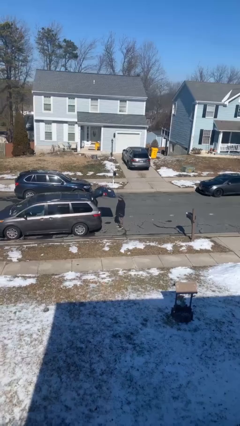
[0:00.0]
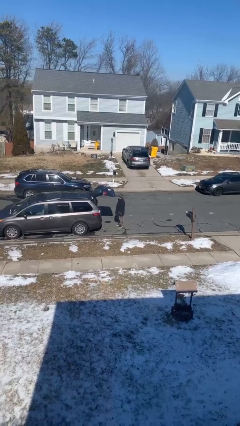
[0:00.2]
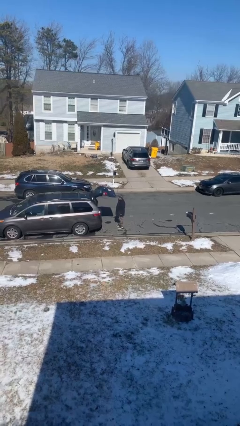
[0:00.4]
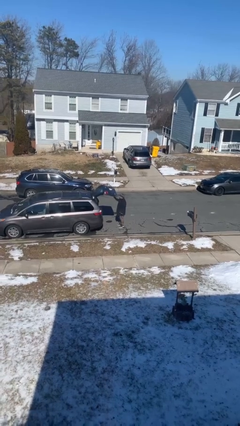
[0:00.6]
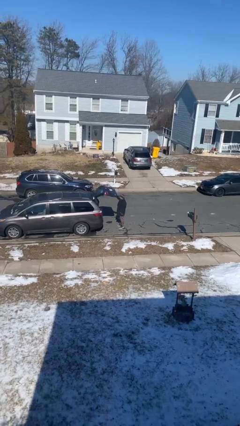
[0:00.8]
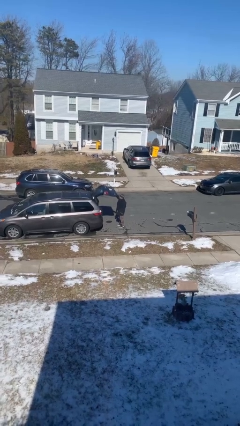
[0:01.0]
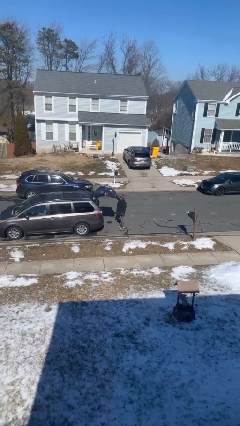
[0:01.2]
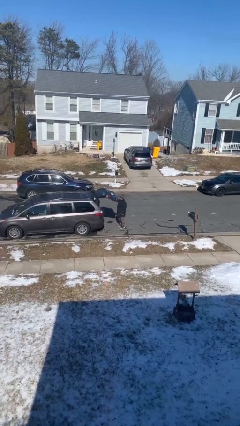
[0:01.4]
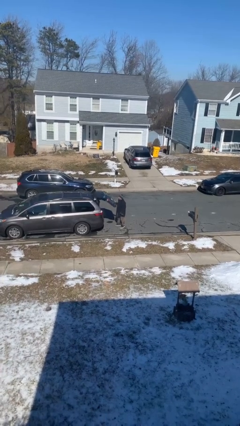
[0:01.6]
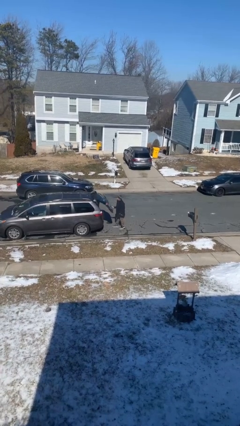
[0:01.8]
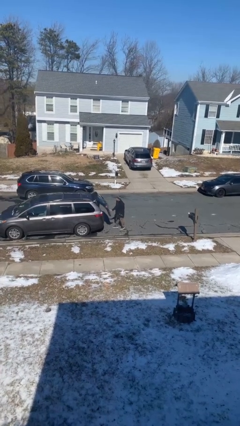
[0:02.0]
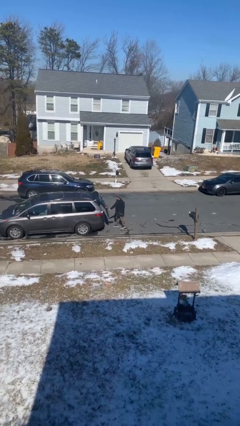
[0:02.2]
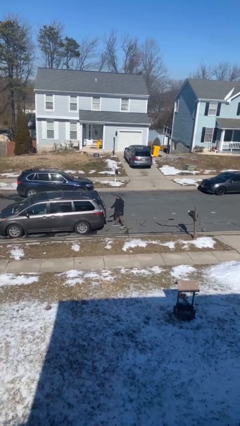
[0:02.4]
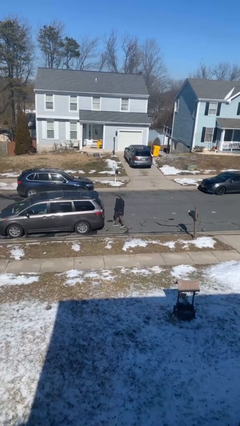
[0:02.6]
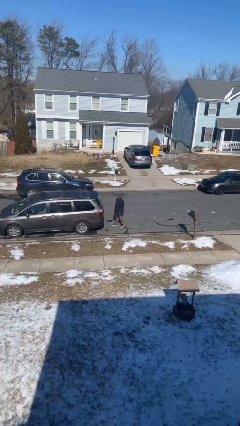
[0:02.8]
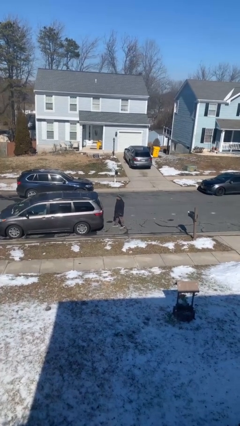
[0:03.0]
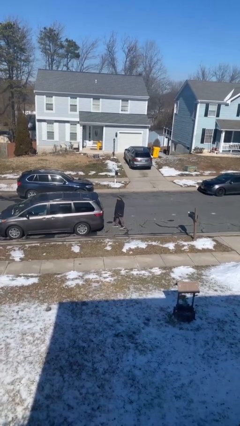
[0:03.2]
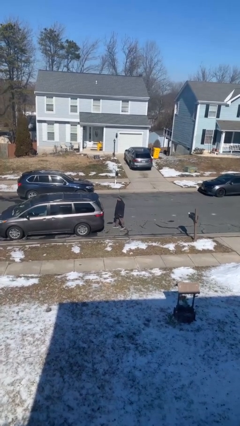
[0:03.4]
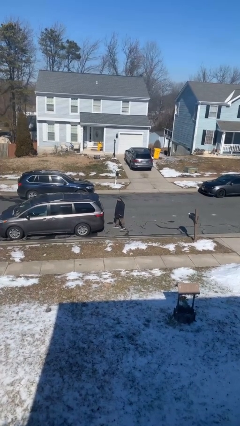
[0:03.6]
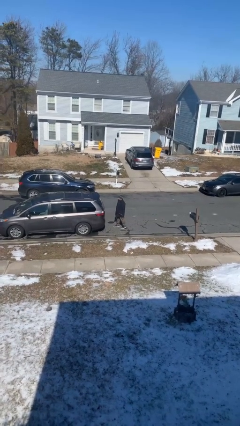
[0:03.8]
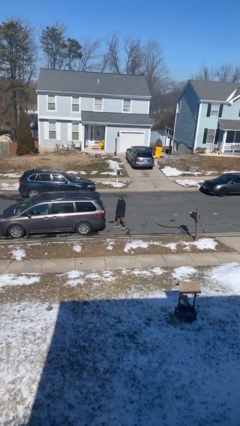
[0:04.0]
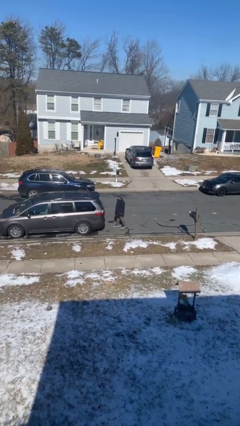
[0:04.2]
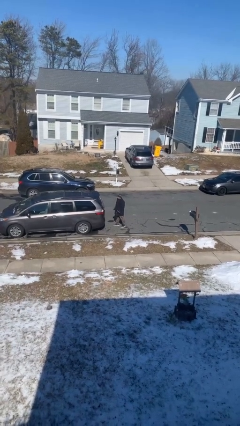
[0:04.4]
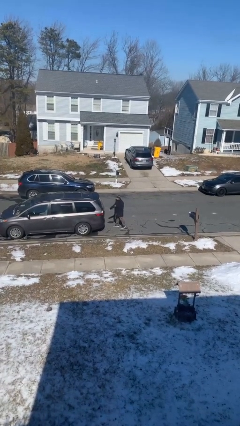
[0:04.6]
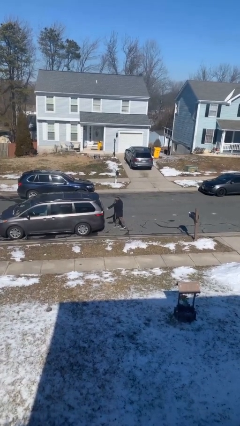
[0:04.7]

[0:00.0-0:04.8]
person closes car trunk

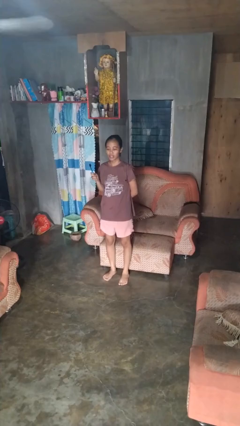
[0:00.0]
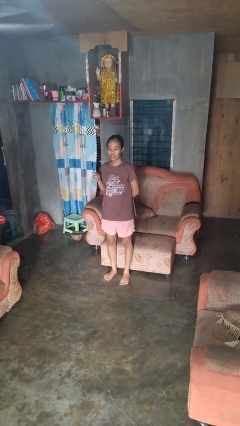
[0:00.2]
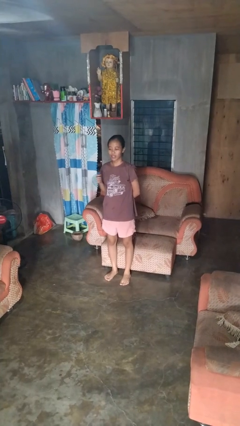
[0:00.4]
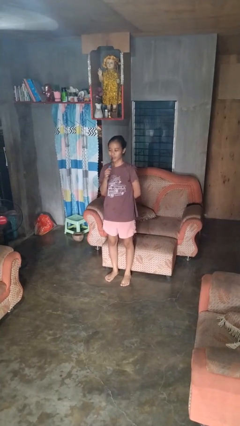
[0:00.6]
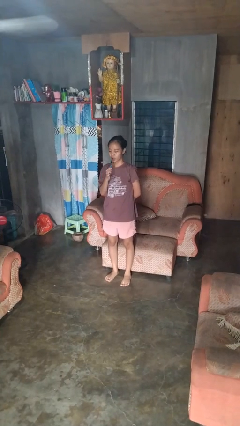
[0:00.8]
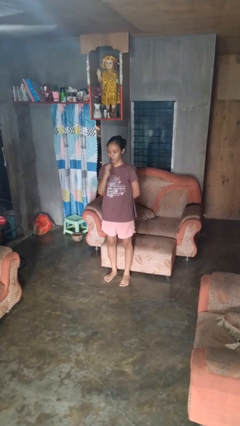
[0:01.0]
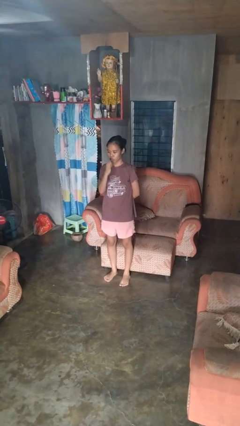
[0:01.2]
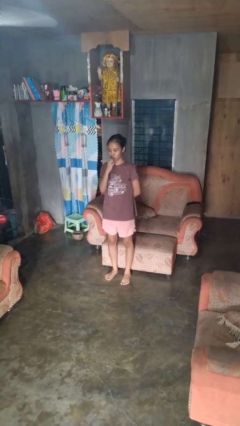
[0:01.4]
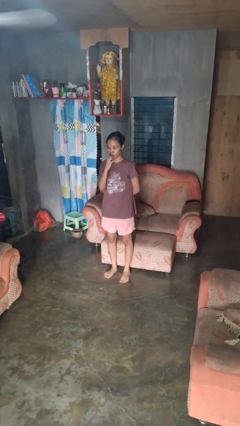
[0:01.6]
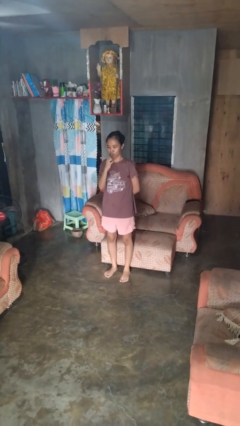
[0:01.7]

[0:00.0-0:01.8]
person brushes teeth

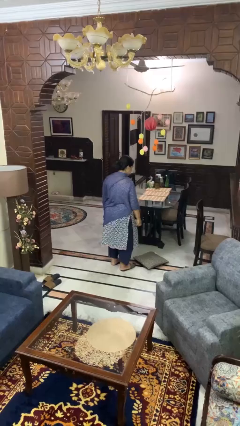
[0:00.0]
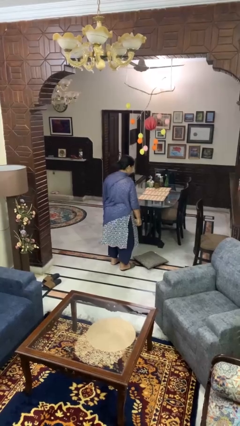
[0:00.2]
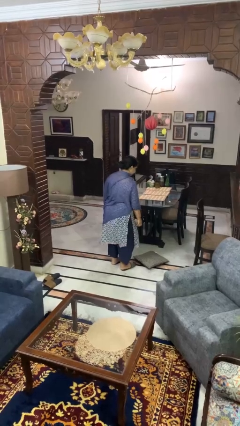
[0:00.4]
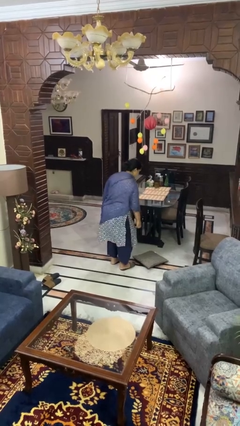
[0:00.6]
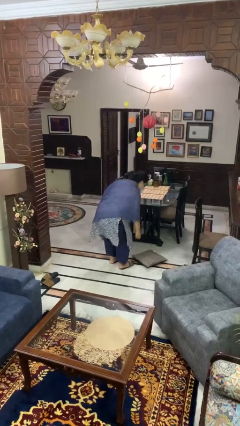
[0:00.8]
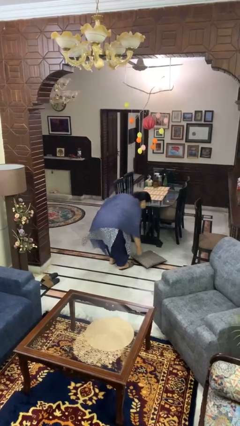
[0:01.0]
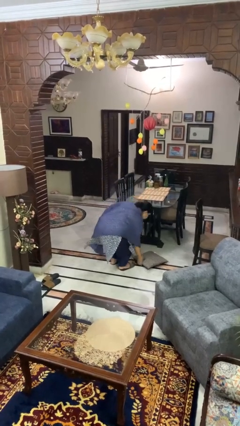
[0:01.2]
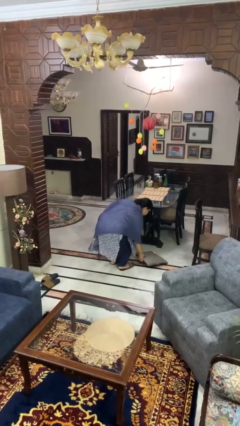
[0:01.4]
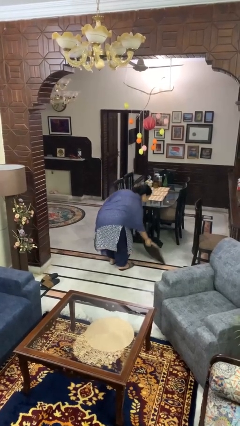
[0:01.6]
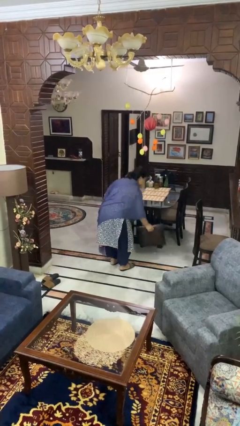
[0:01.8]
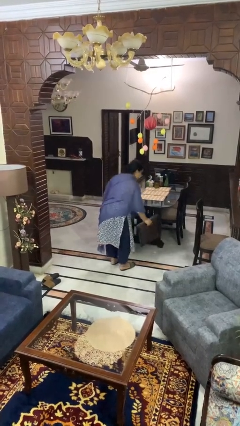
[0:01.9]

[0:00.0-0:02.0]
person picks up object from floor

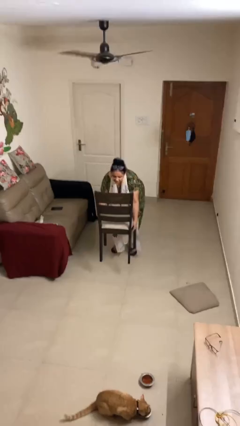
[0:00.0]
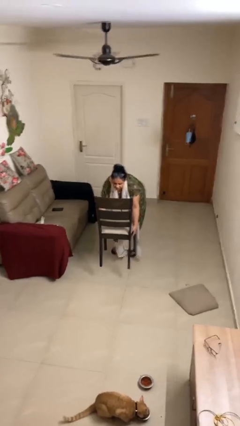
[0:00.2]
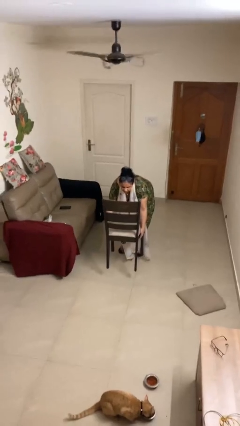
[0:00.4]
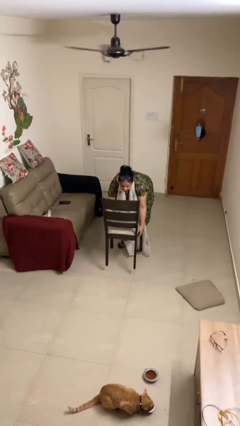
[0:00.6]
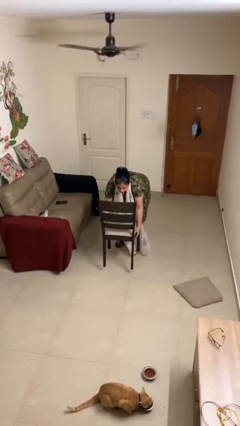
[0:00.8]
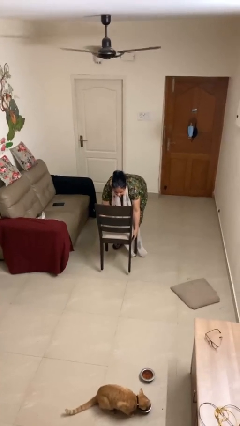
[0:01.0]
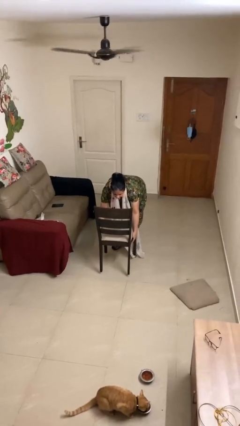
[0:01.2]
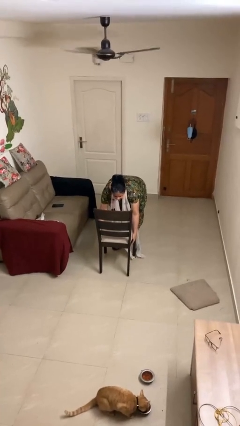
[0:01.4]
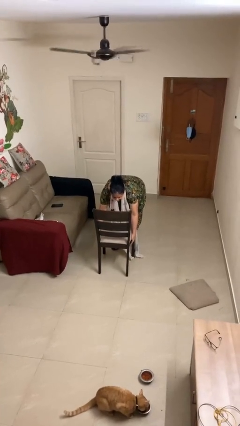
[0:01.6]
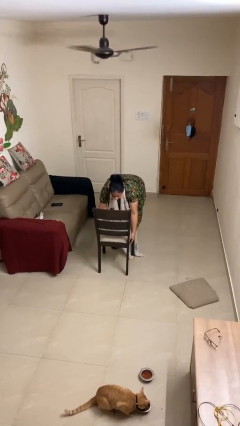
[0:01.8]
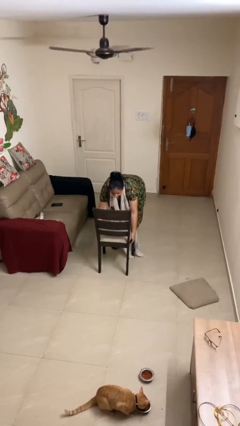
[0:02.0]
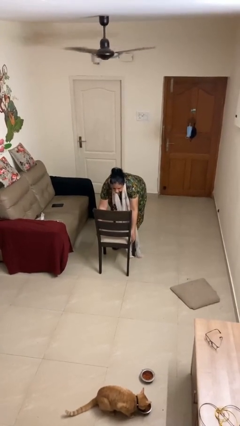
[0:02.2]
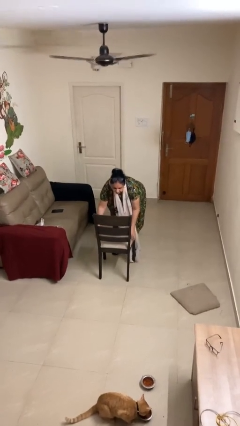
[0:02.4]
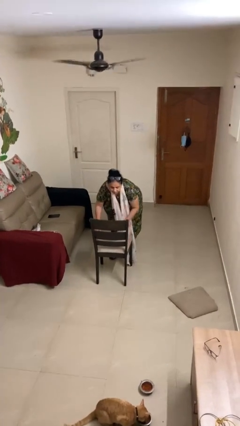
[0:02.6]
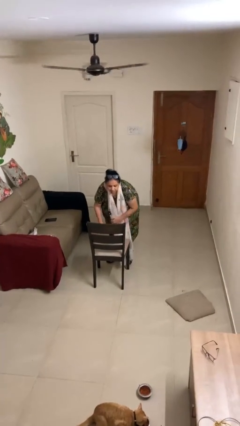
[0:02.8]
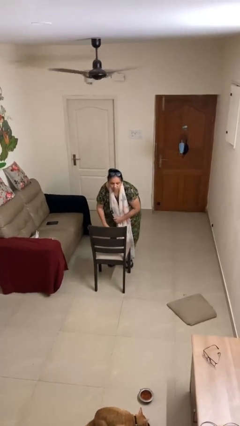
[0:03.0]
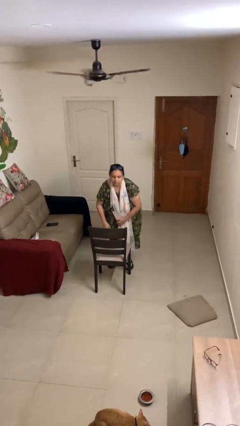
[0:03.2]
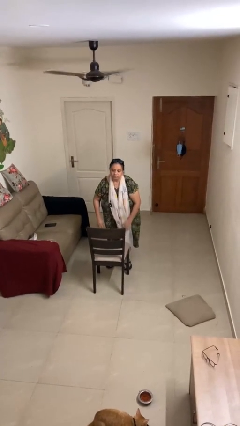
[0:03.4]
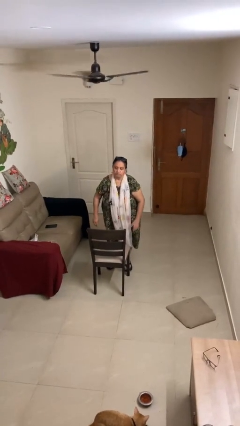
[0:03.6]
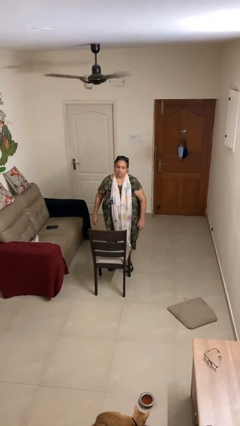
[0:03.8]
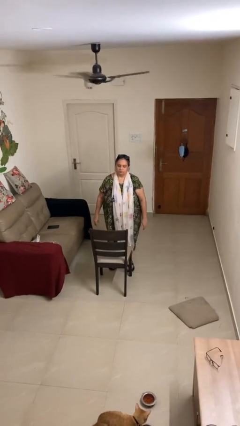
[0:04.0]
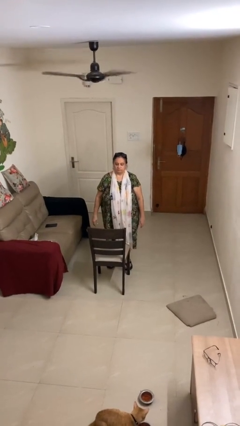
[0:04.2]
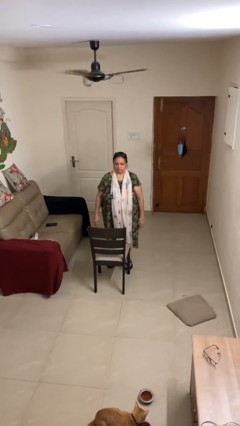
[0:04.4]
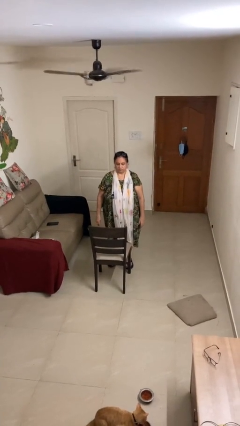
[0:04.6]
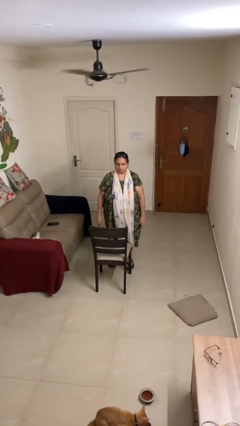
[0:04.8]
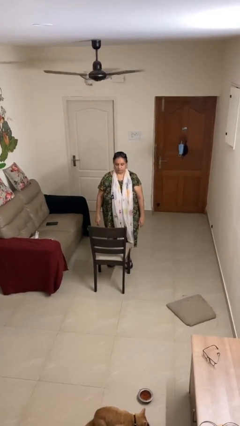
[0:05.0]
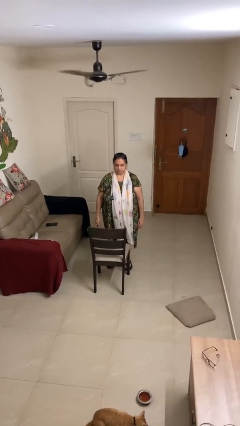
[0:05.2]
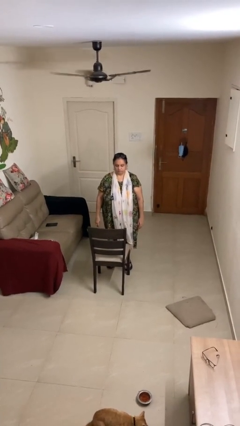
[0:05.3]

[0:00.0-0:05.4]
person puts down object on floor

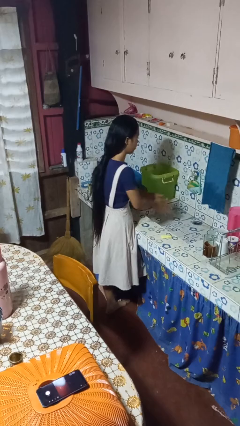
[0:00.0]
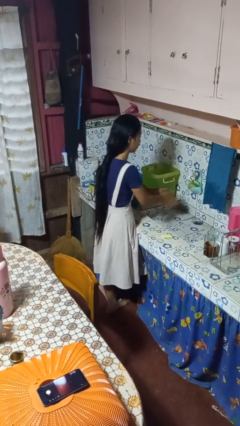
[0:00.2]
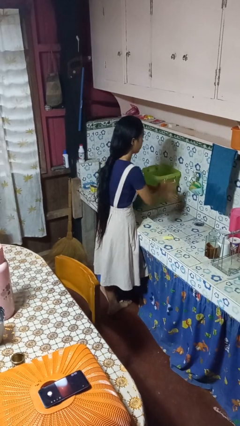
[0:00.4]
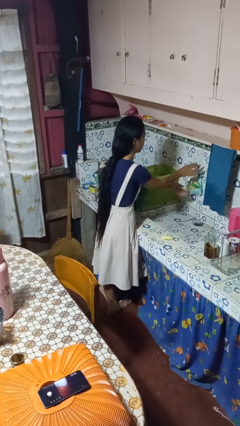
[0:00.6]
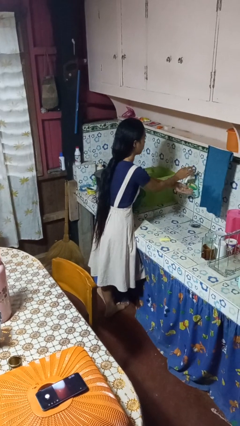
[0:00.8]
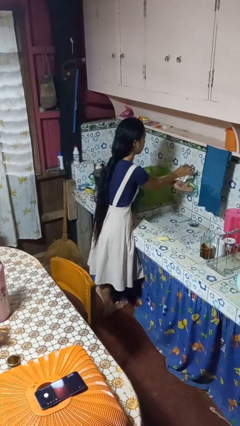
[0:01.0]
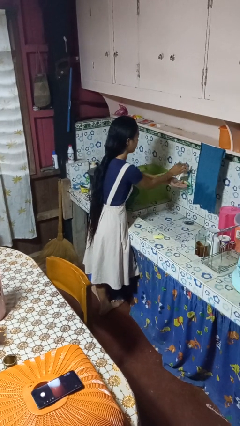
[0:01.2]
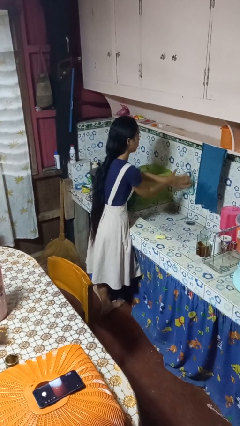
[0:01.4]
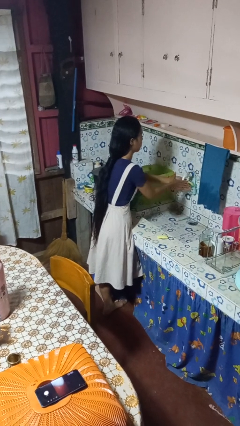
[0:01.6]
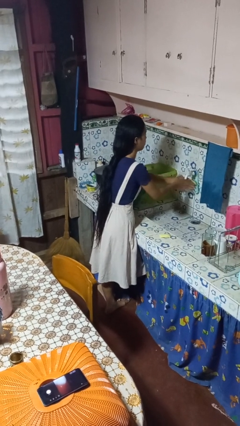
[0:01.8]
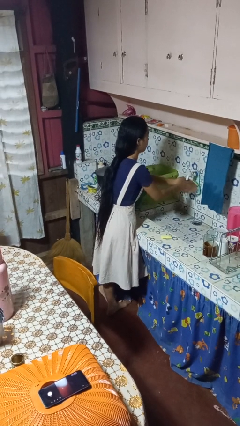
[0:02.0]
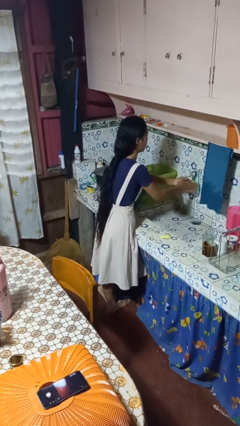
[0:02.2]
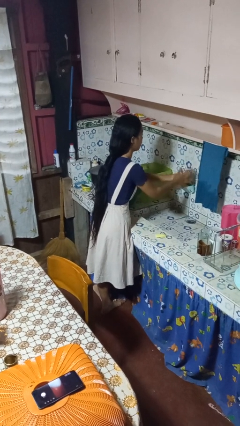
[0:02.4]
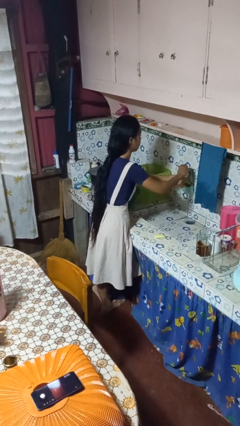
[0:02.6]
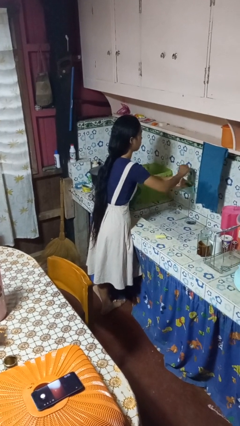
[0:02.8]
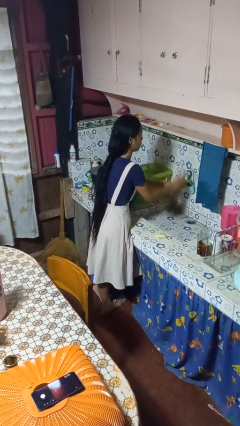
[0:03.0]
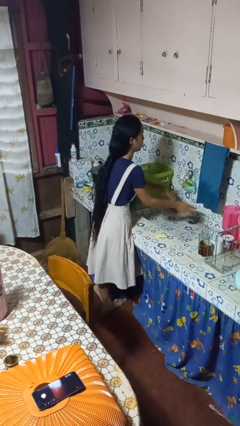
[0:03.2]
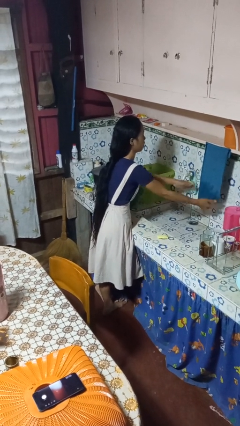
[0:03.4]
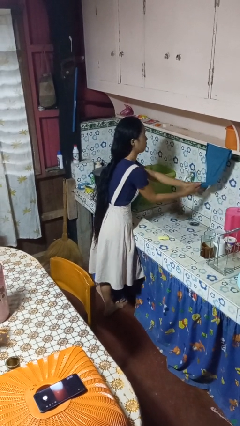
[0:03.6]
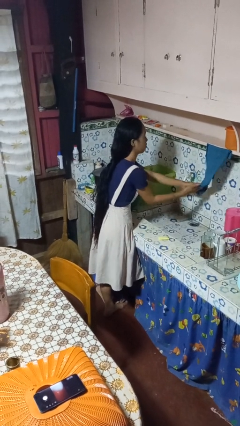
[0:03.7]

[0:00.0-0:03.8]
person washes hands
